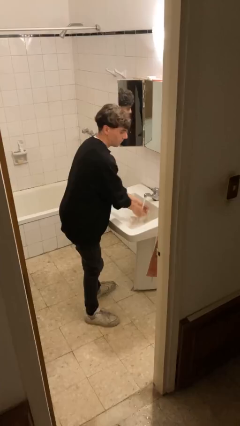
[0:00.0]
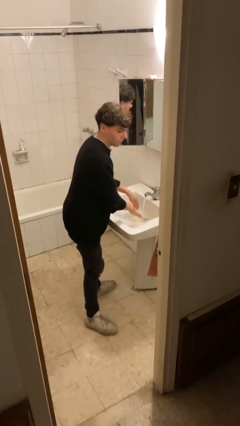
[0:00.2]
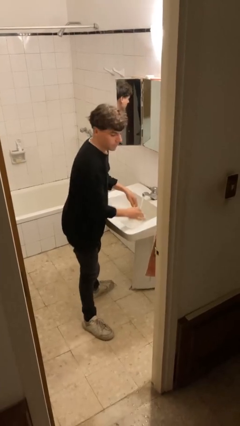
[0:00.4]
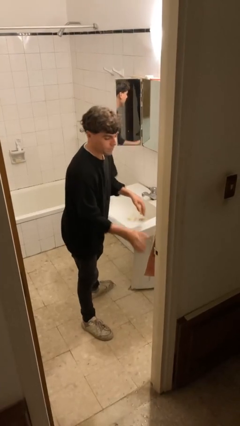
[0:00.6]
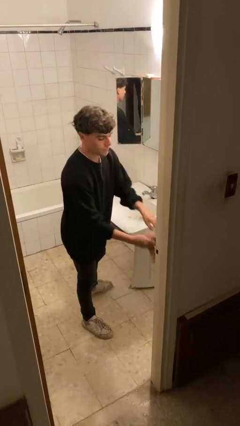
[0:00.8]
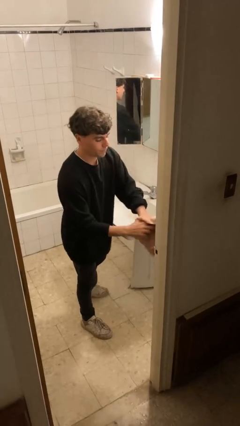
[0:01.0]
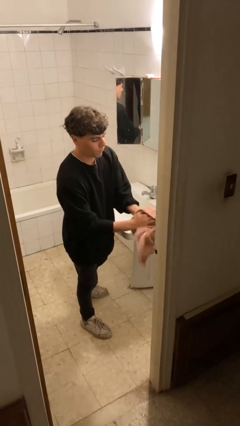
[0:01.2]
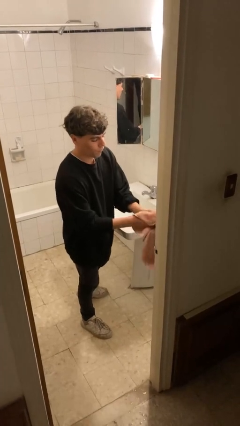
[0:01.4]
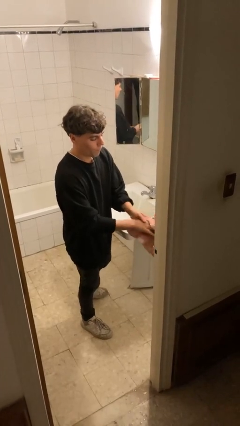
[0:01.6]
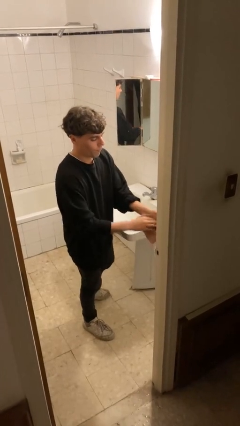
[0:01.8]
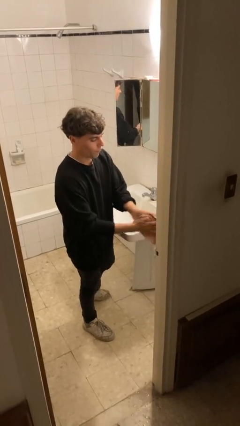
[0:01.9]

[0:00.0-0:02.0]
person dries hands with towel

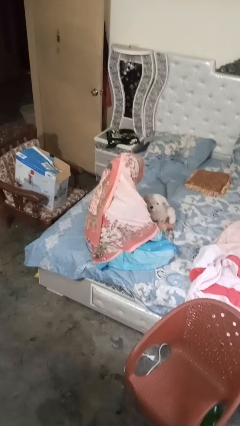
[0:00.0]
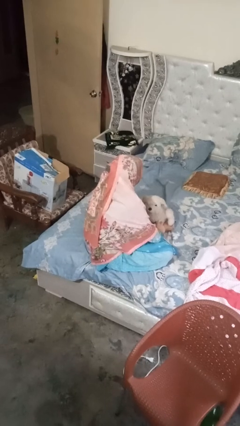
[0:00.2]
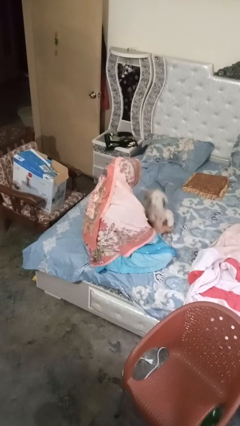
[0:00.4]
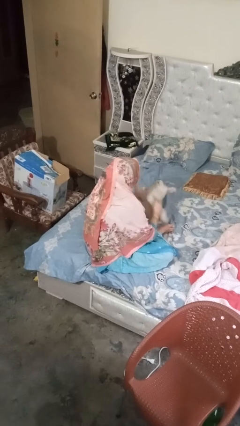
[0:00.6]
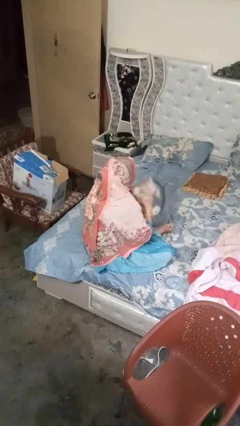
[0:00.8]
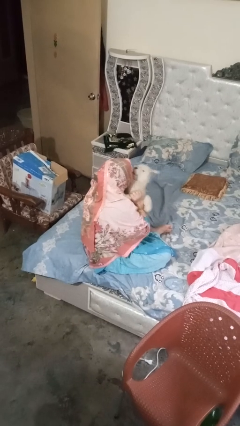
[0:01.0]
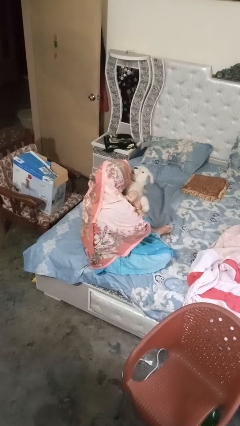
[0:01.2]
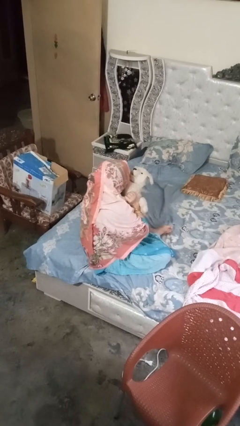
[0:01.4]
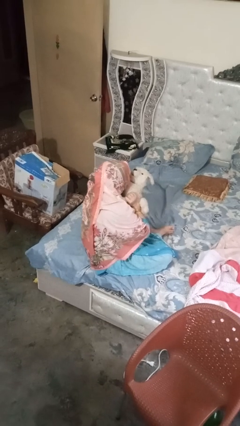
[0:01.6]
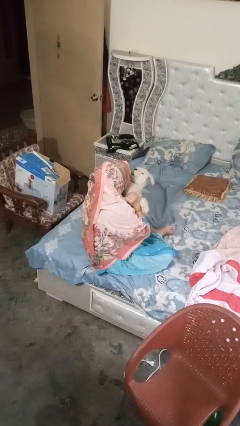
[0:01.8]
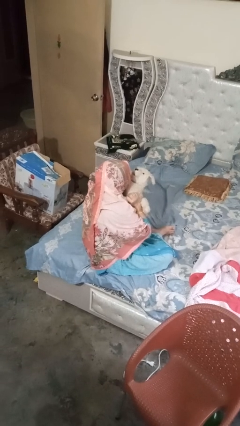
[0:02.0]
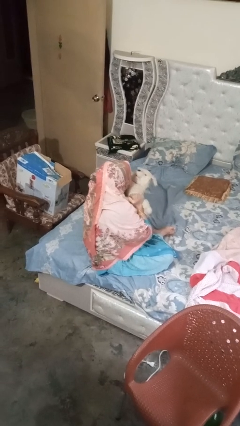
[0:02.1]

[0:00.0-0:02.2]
person hugs stuffed animal

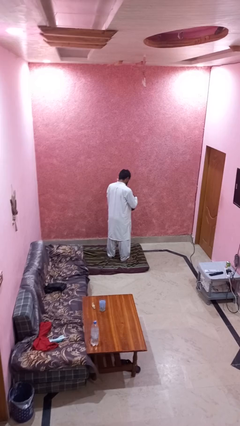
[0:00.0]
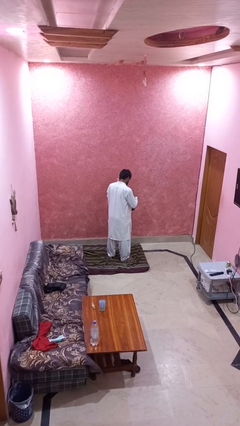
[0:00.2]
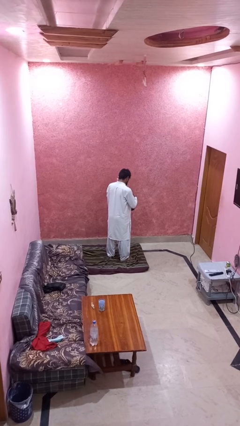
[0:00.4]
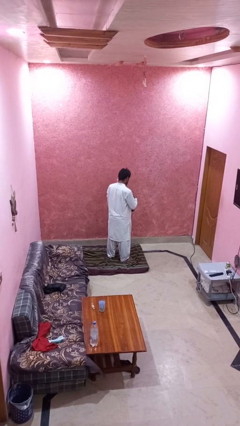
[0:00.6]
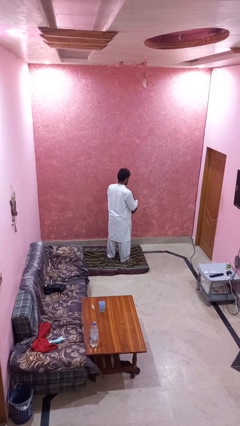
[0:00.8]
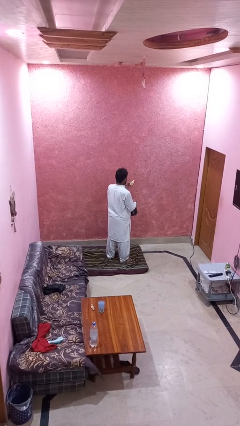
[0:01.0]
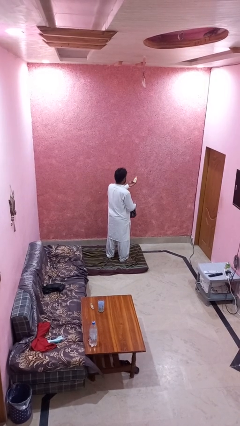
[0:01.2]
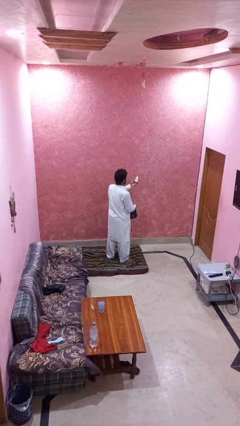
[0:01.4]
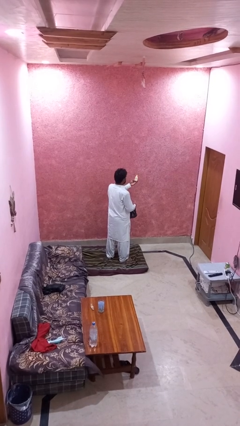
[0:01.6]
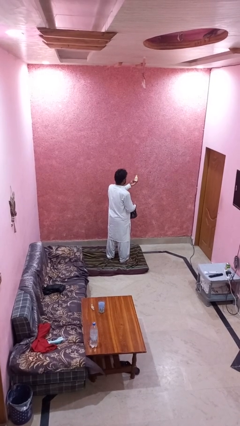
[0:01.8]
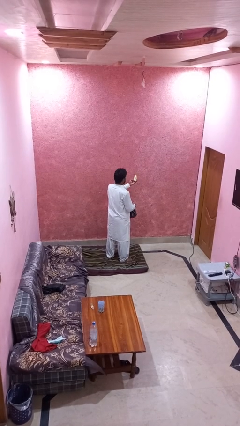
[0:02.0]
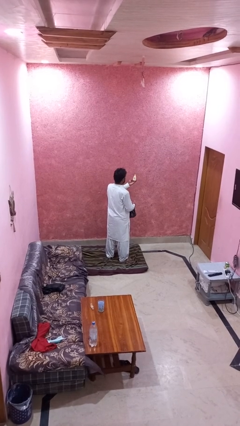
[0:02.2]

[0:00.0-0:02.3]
person takes object from purse

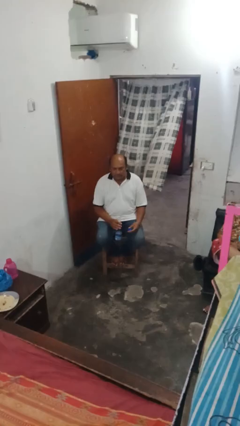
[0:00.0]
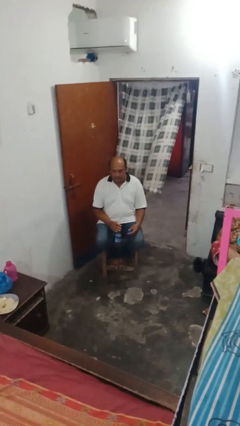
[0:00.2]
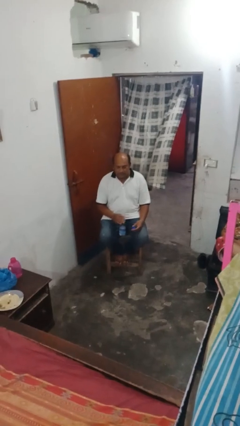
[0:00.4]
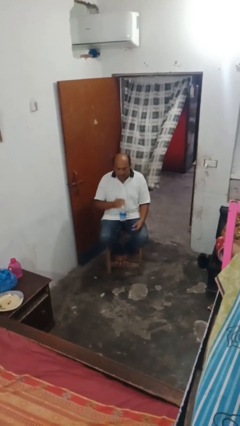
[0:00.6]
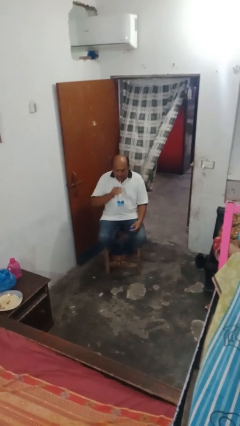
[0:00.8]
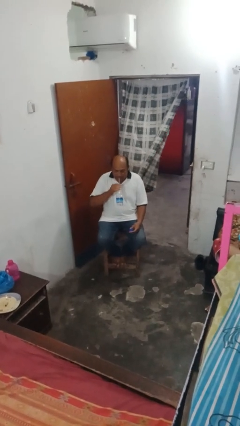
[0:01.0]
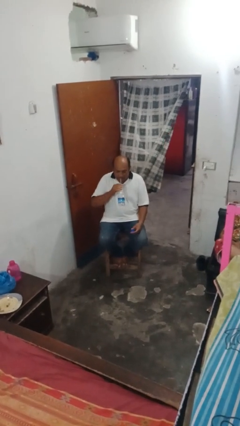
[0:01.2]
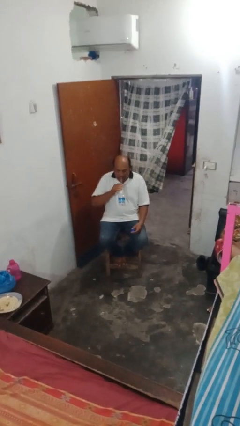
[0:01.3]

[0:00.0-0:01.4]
person drinks from straw

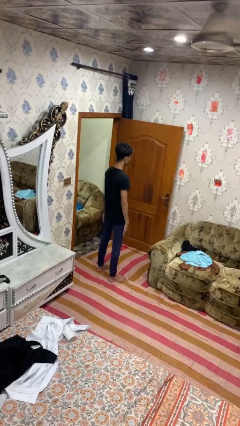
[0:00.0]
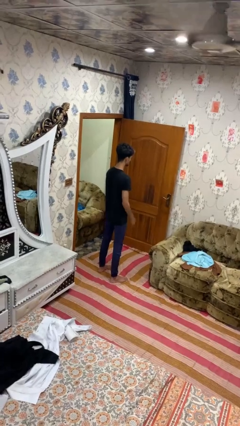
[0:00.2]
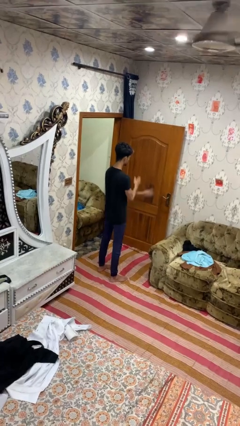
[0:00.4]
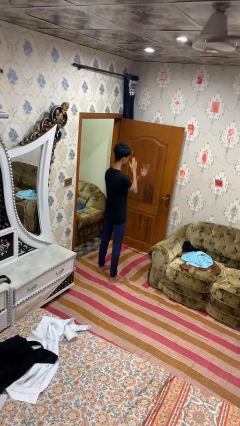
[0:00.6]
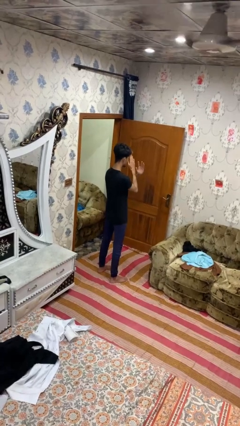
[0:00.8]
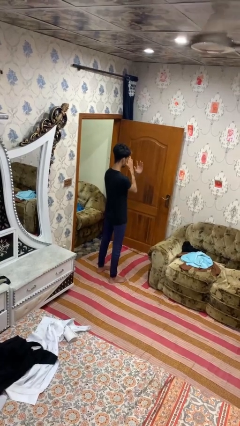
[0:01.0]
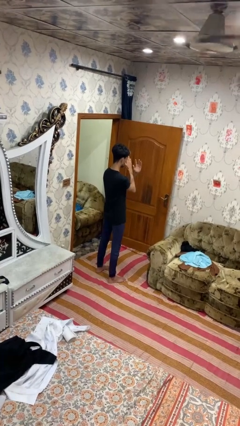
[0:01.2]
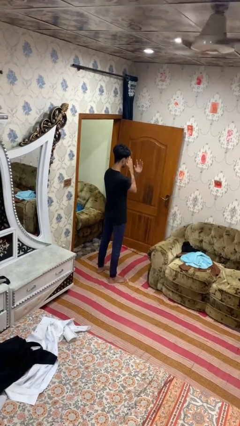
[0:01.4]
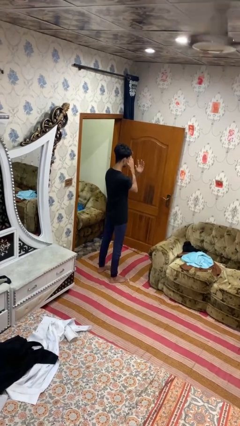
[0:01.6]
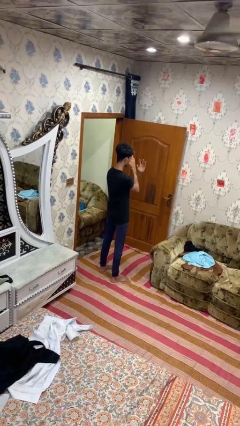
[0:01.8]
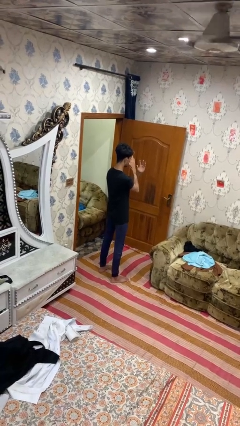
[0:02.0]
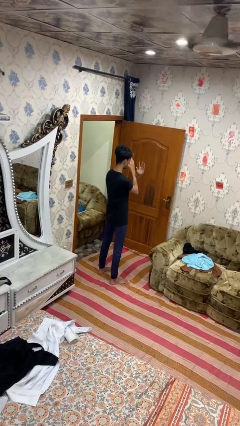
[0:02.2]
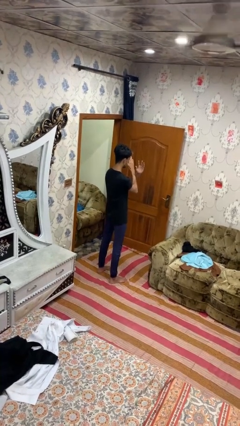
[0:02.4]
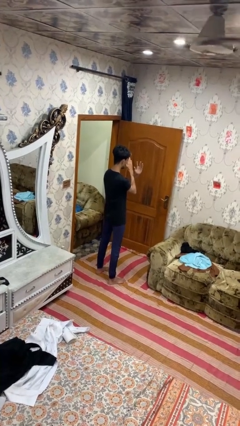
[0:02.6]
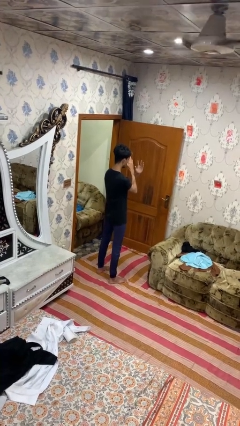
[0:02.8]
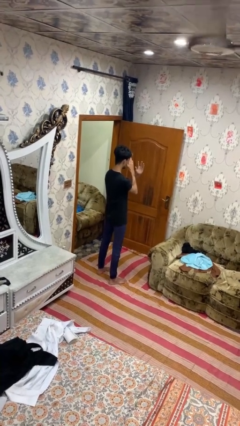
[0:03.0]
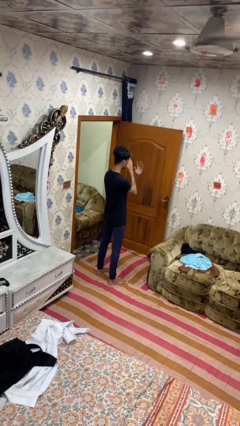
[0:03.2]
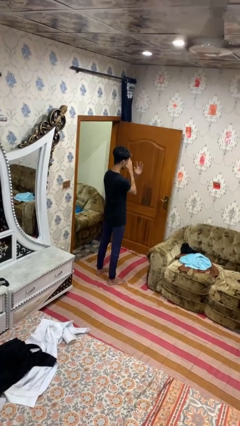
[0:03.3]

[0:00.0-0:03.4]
person gestures arms x

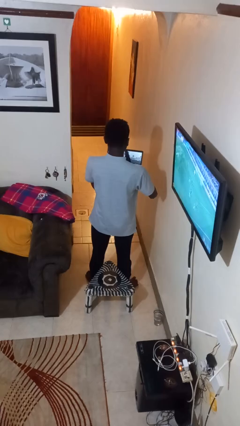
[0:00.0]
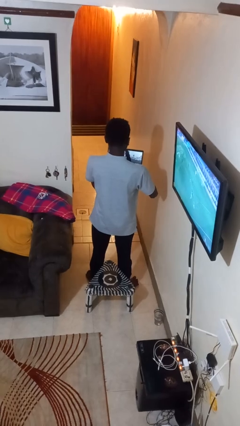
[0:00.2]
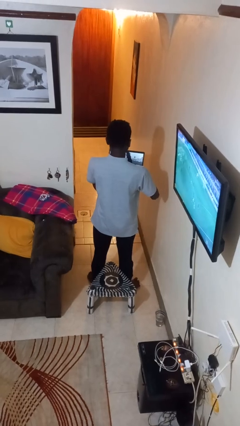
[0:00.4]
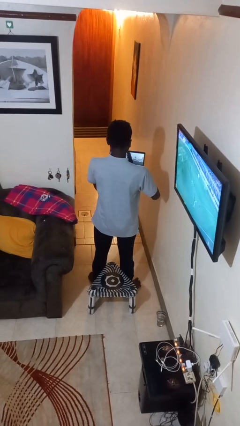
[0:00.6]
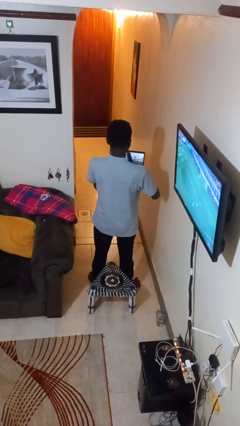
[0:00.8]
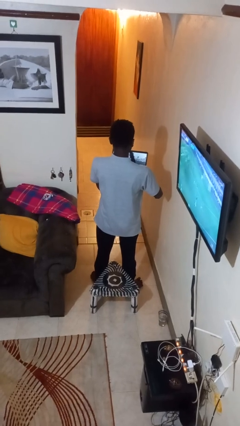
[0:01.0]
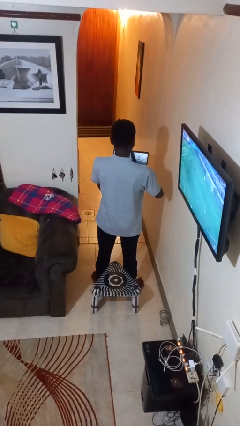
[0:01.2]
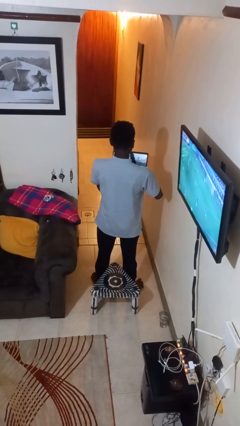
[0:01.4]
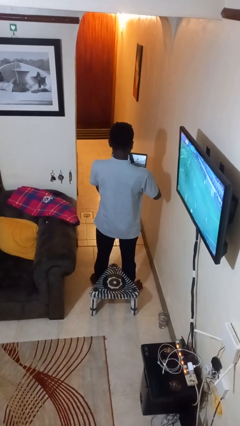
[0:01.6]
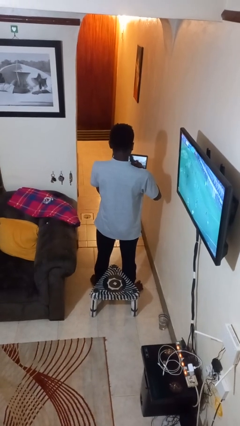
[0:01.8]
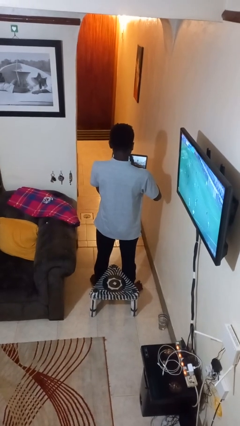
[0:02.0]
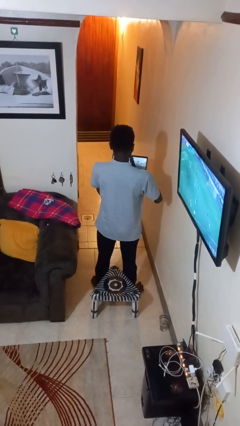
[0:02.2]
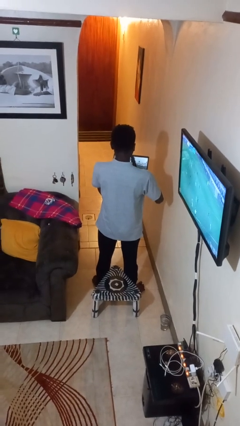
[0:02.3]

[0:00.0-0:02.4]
person interacts with tablet

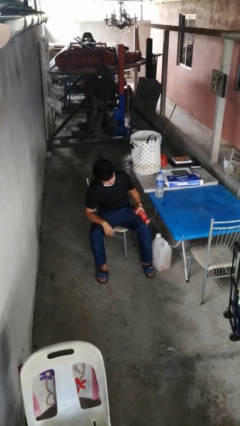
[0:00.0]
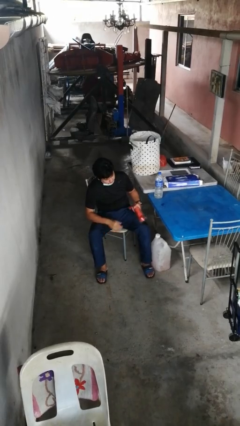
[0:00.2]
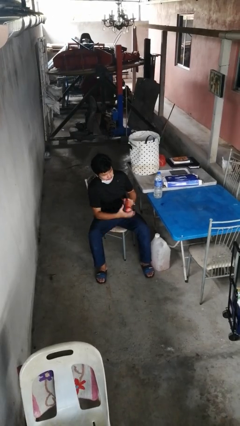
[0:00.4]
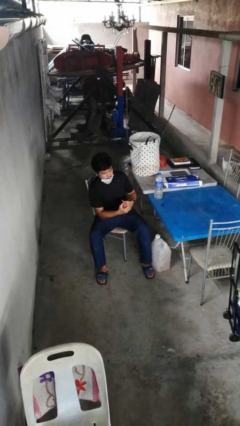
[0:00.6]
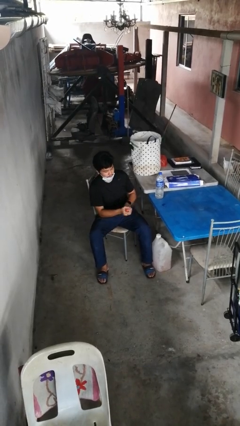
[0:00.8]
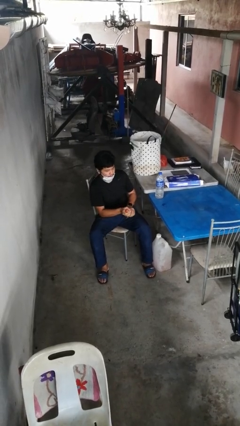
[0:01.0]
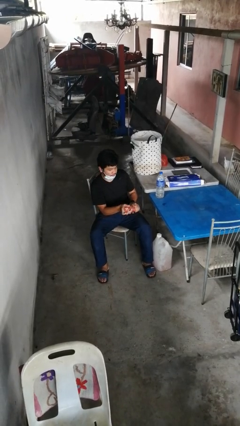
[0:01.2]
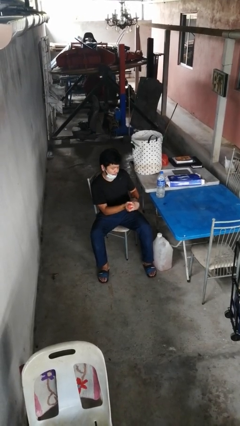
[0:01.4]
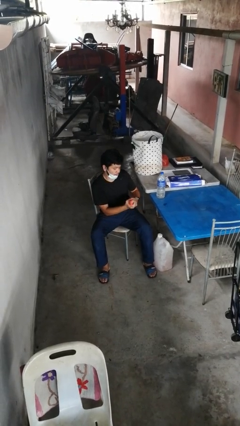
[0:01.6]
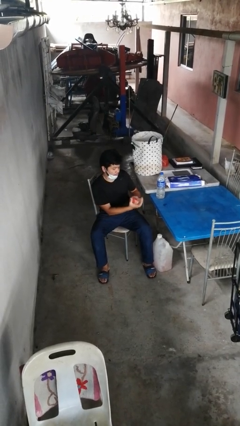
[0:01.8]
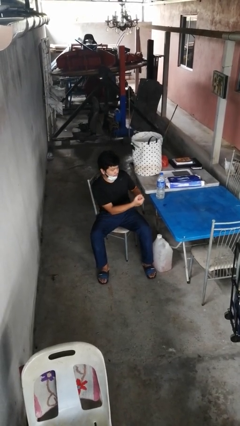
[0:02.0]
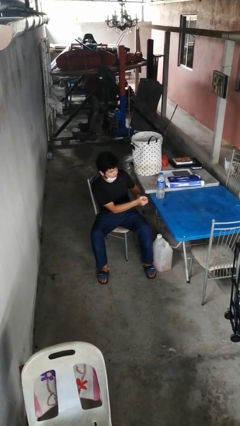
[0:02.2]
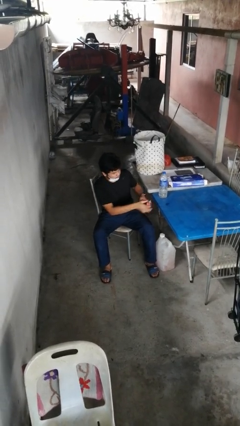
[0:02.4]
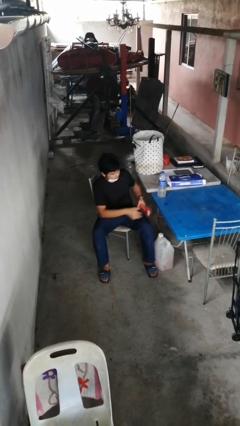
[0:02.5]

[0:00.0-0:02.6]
person squeezes object

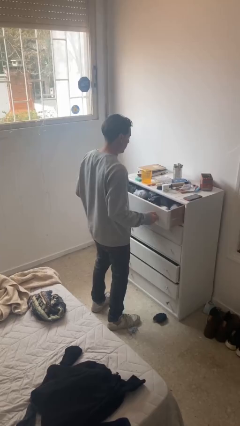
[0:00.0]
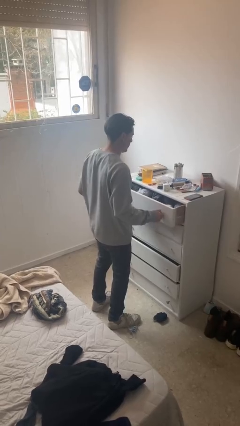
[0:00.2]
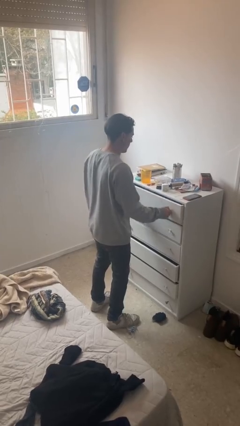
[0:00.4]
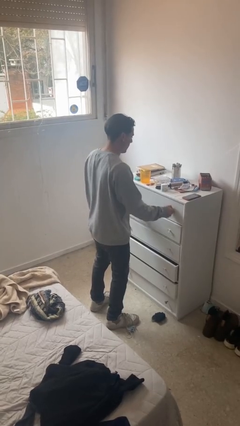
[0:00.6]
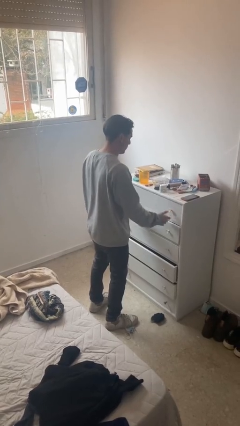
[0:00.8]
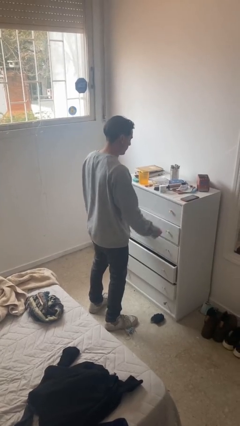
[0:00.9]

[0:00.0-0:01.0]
person closes dresser drawer
